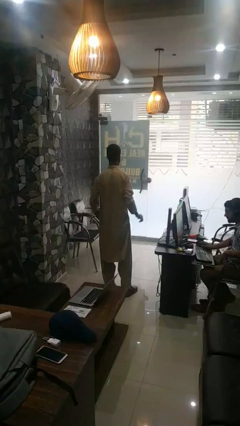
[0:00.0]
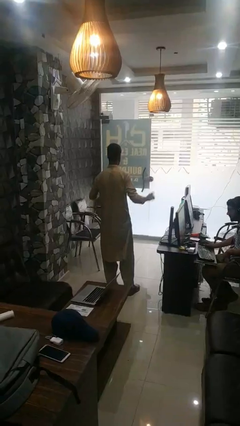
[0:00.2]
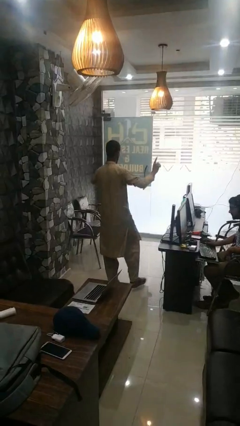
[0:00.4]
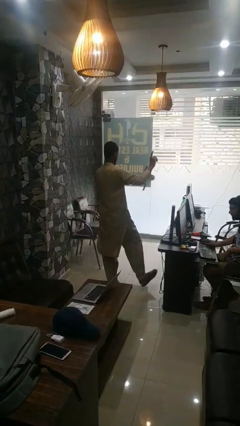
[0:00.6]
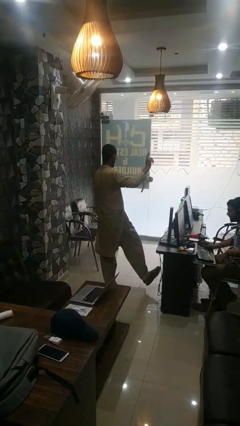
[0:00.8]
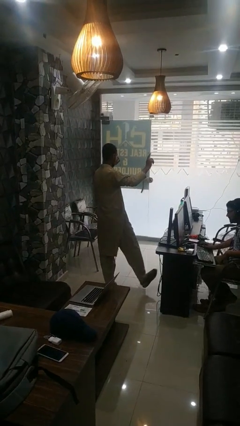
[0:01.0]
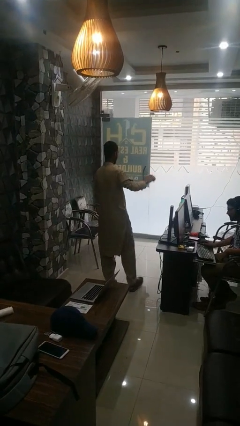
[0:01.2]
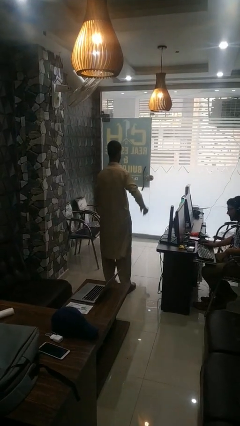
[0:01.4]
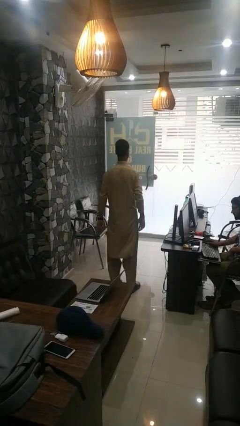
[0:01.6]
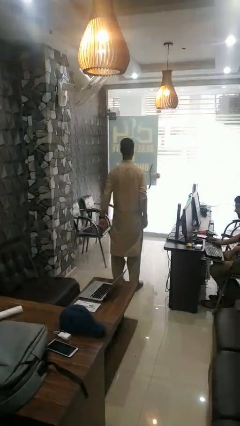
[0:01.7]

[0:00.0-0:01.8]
person dances in place

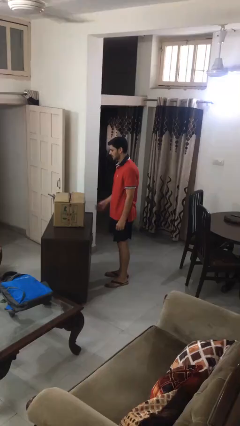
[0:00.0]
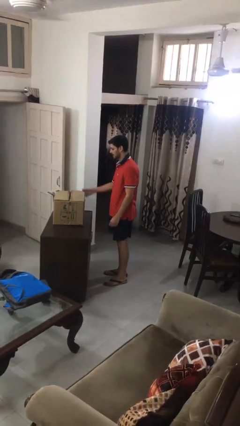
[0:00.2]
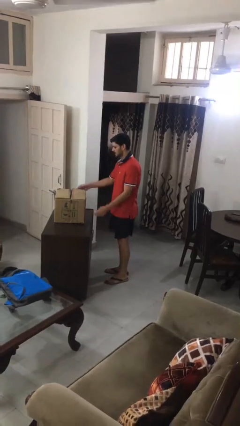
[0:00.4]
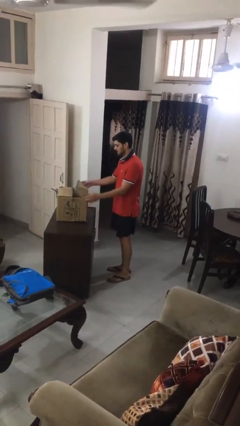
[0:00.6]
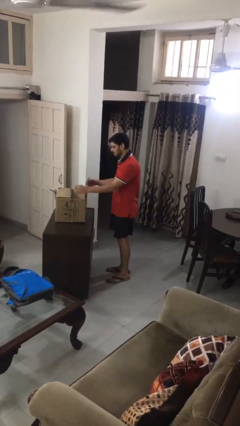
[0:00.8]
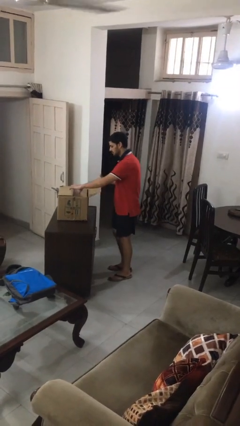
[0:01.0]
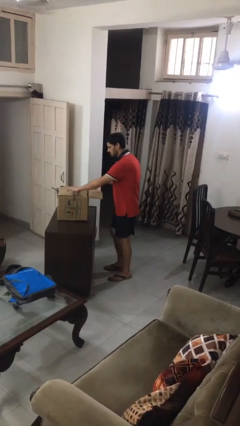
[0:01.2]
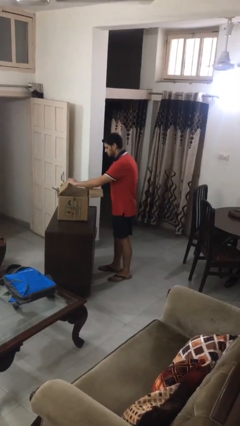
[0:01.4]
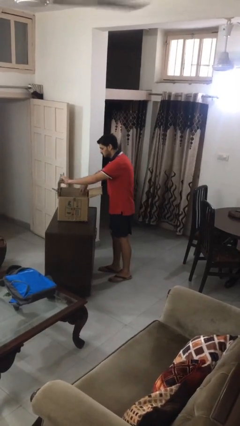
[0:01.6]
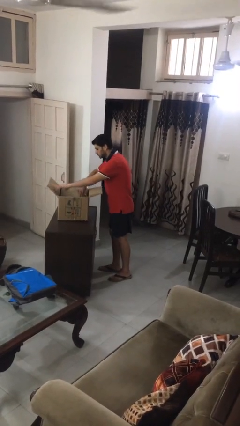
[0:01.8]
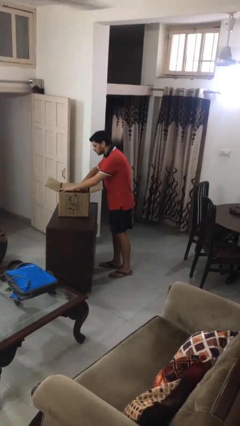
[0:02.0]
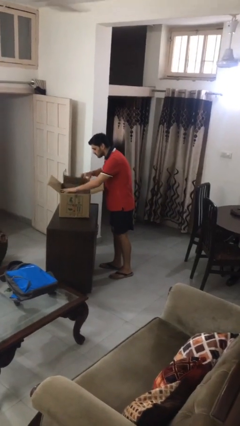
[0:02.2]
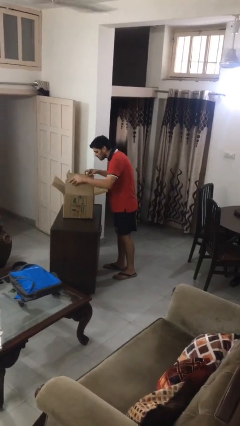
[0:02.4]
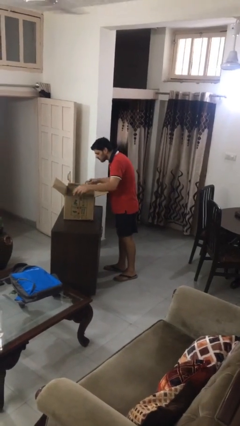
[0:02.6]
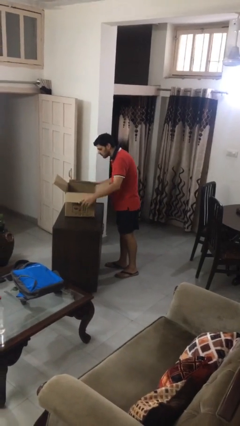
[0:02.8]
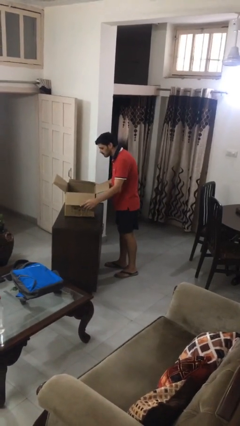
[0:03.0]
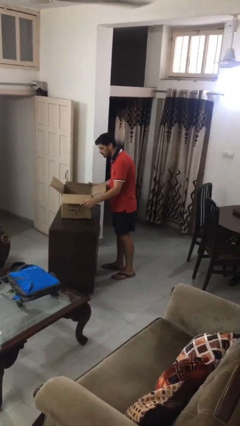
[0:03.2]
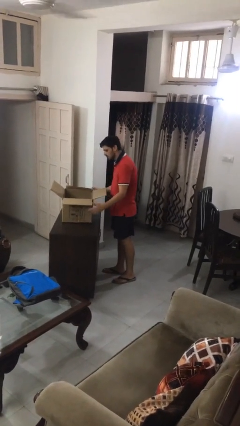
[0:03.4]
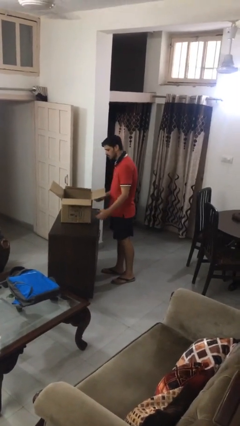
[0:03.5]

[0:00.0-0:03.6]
person opens box

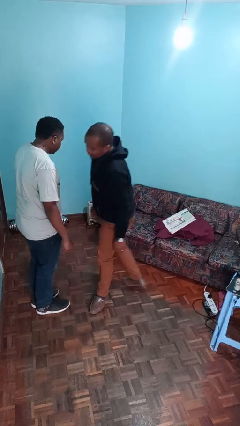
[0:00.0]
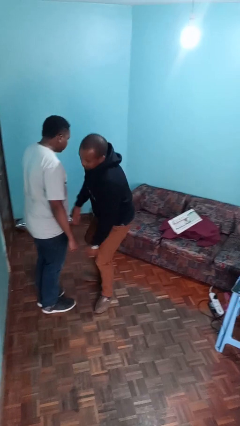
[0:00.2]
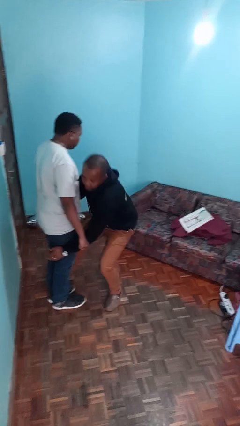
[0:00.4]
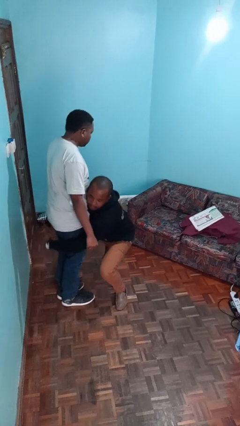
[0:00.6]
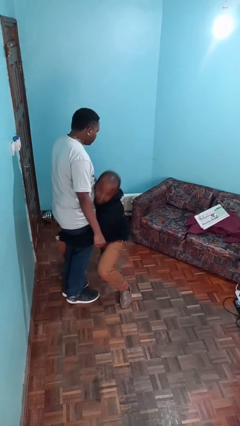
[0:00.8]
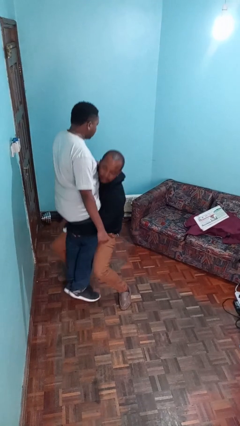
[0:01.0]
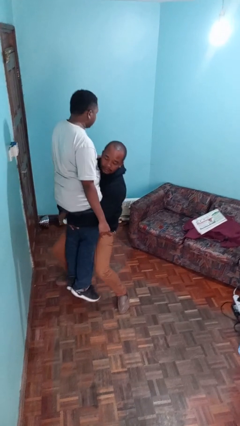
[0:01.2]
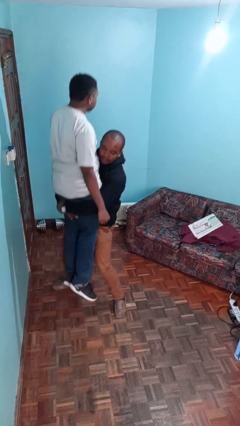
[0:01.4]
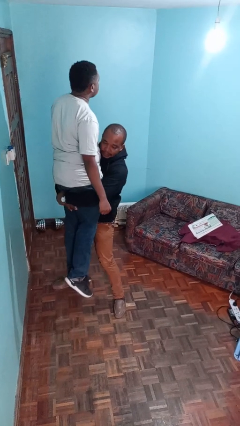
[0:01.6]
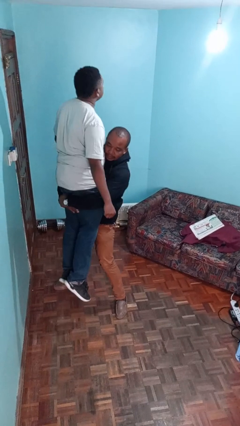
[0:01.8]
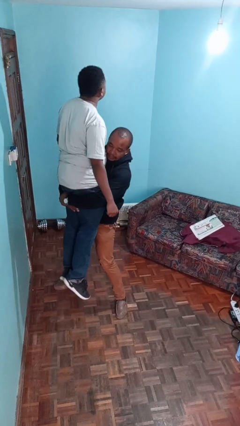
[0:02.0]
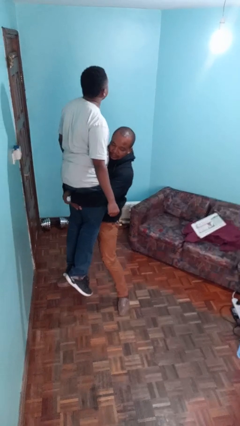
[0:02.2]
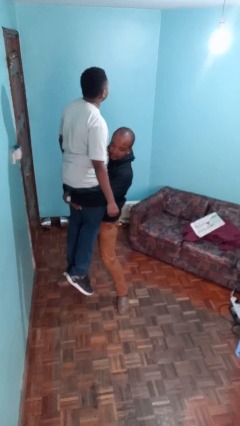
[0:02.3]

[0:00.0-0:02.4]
person picks up person

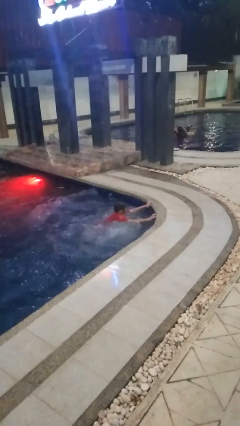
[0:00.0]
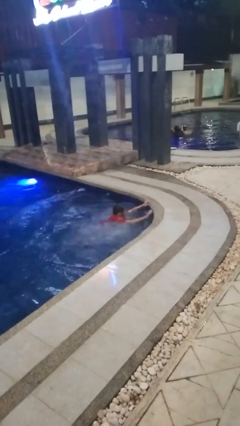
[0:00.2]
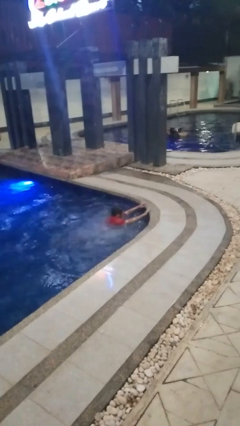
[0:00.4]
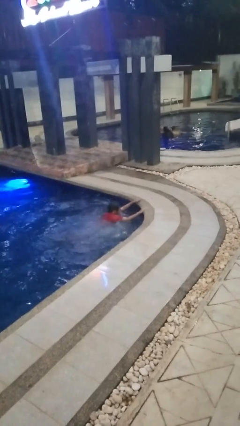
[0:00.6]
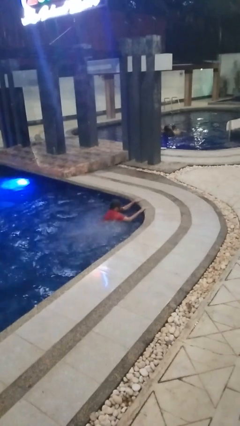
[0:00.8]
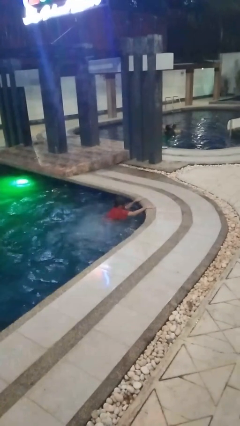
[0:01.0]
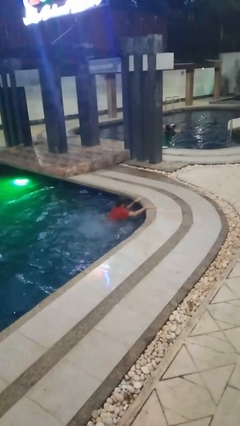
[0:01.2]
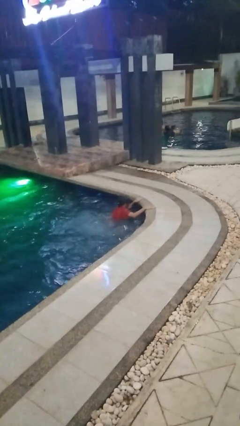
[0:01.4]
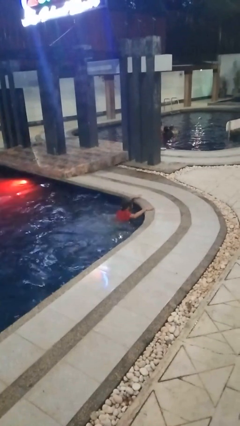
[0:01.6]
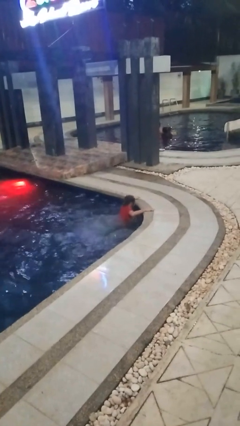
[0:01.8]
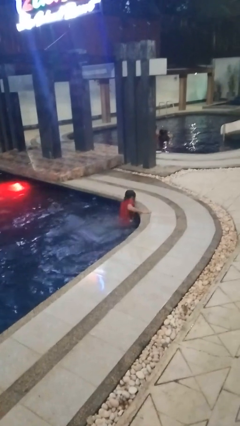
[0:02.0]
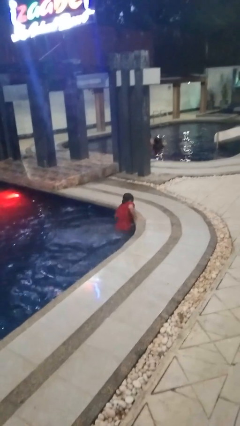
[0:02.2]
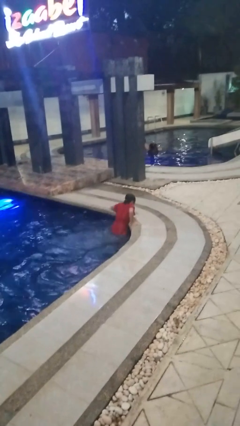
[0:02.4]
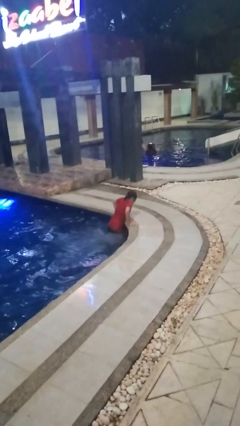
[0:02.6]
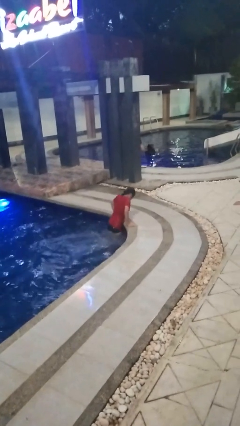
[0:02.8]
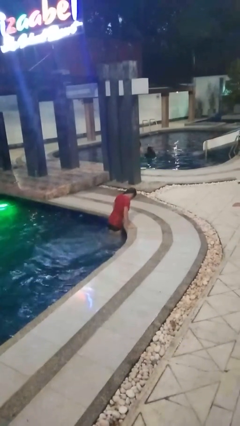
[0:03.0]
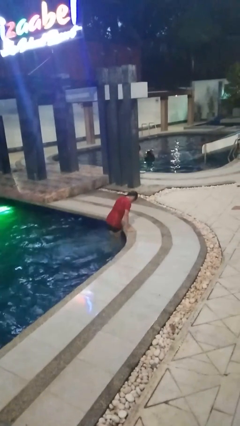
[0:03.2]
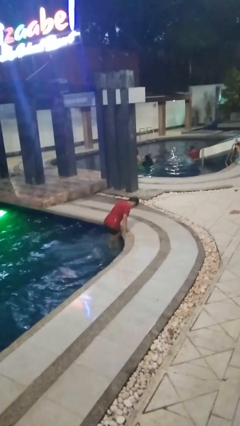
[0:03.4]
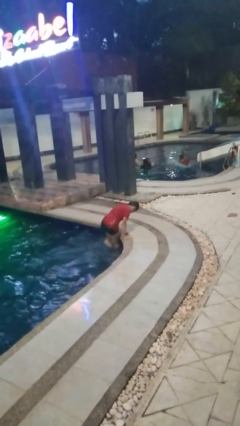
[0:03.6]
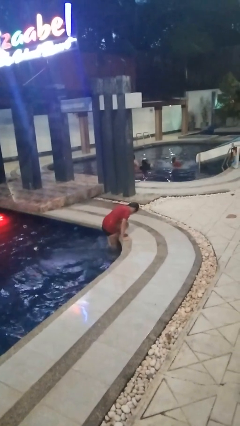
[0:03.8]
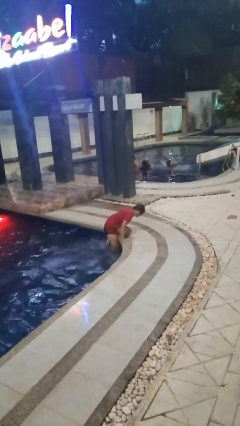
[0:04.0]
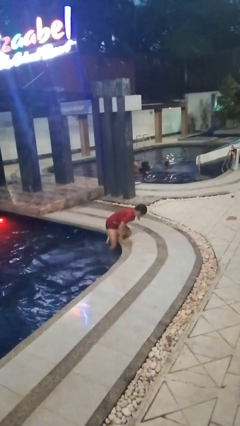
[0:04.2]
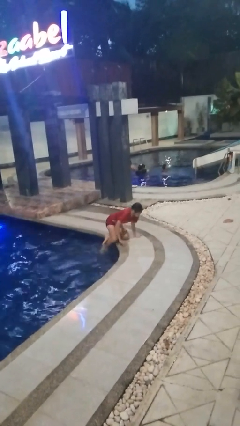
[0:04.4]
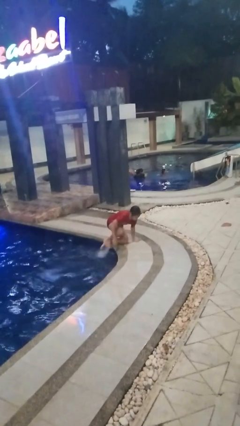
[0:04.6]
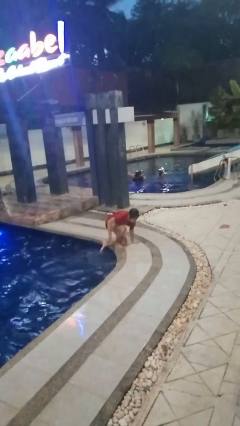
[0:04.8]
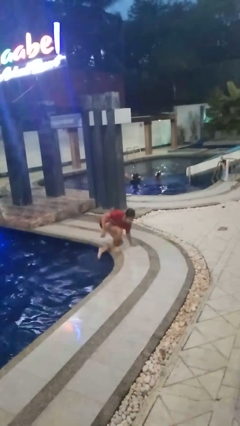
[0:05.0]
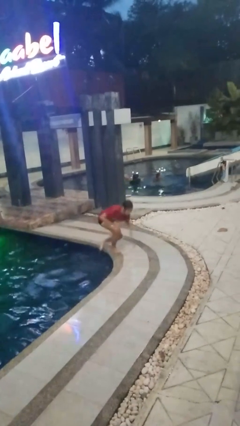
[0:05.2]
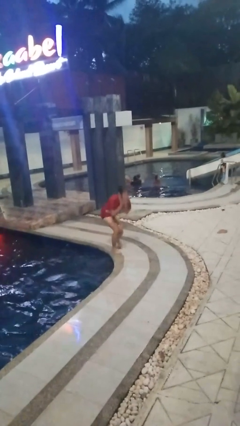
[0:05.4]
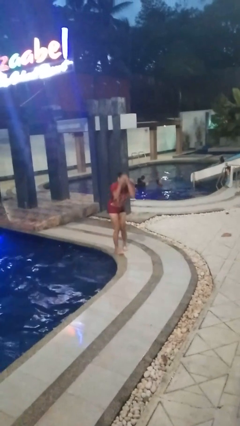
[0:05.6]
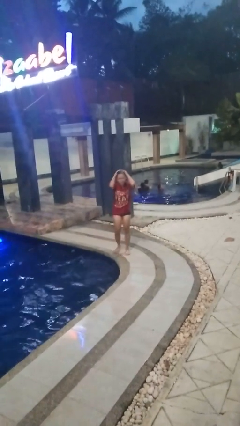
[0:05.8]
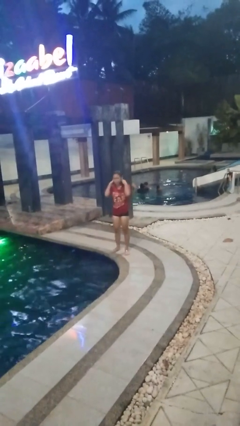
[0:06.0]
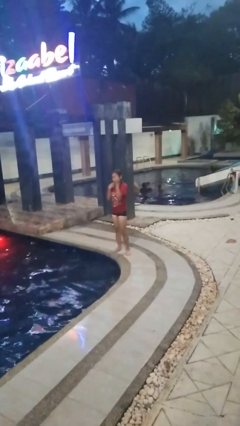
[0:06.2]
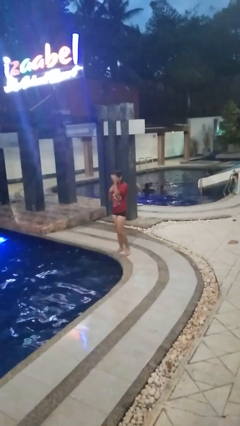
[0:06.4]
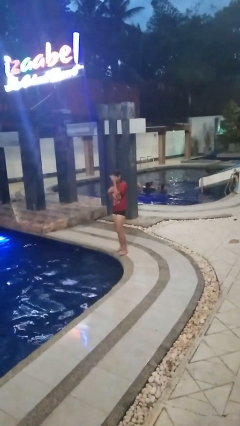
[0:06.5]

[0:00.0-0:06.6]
person exits pool

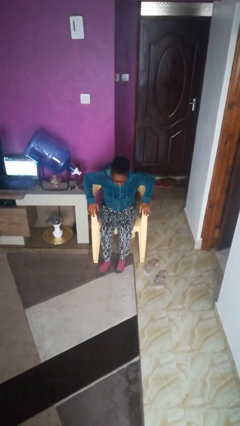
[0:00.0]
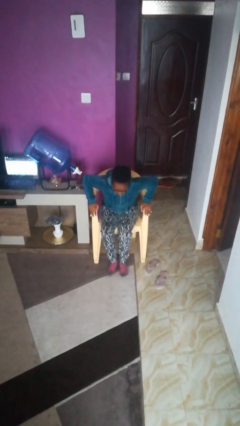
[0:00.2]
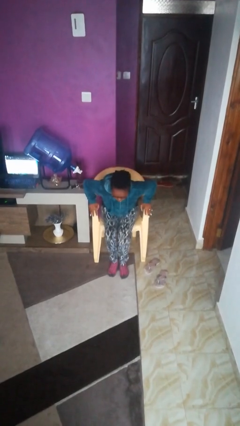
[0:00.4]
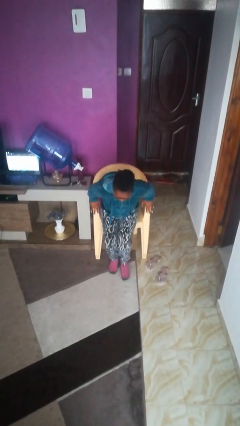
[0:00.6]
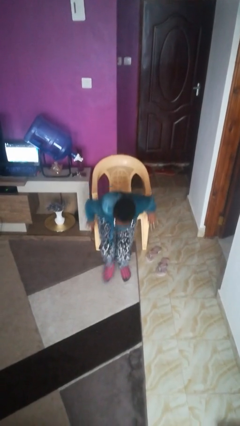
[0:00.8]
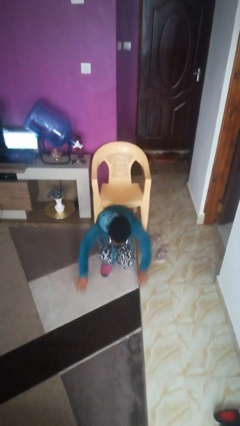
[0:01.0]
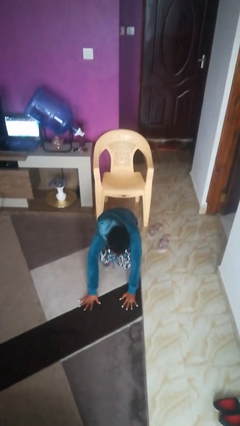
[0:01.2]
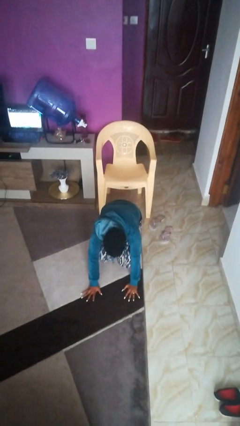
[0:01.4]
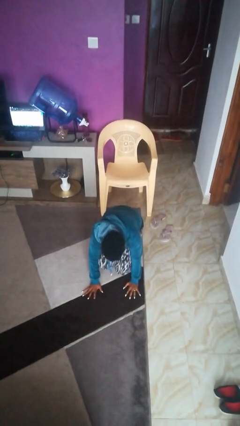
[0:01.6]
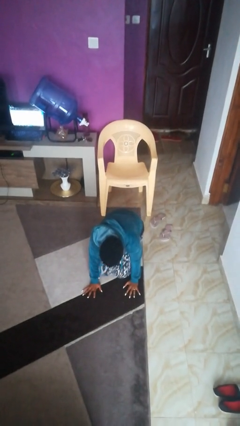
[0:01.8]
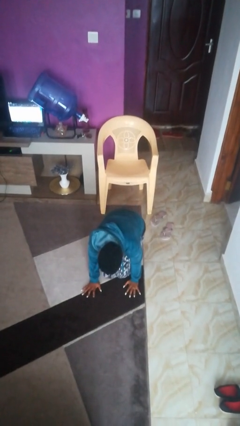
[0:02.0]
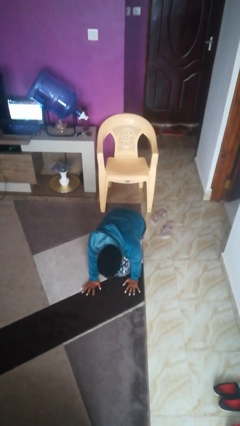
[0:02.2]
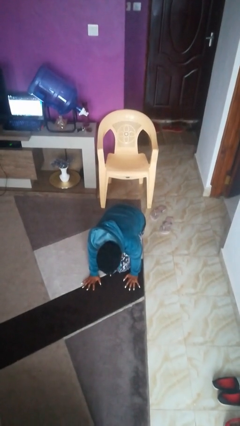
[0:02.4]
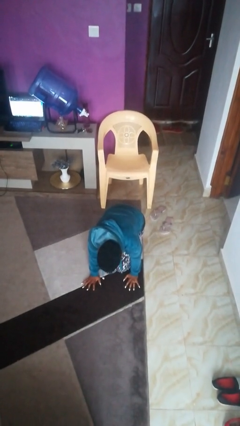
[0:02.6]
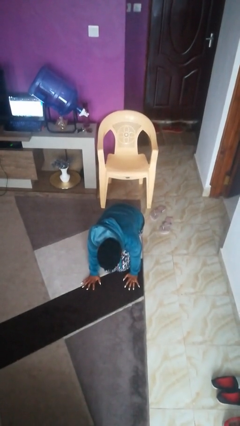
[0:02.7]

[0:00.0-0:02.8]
person falls from chair
